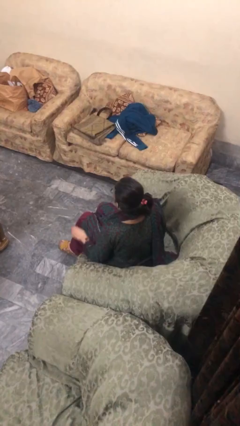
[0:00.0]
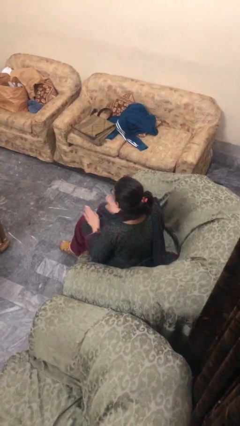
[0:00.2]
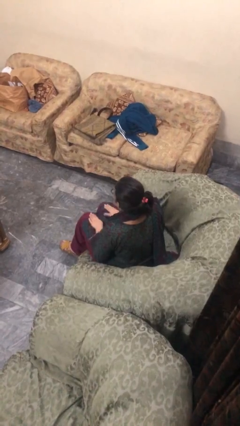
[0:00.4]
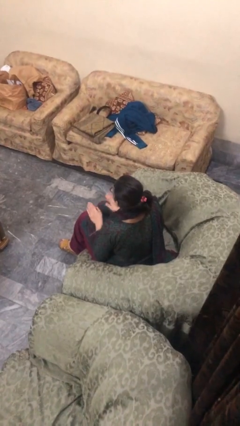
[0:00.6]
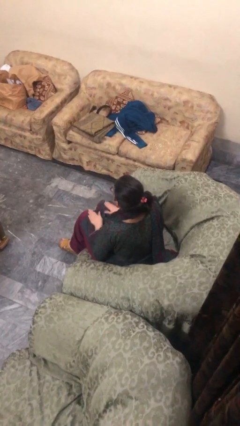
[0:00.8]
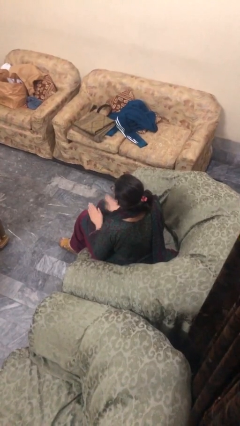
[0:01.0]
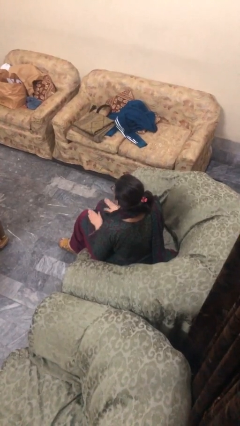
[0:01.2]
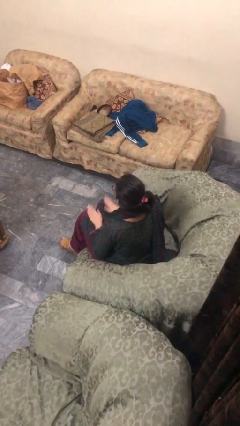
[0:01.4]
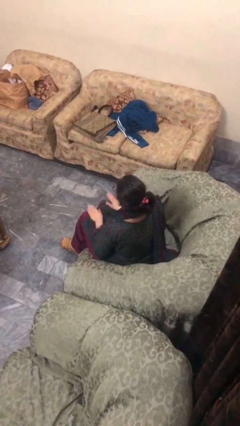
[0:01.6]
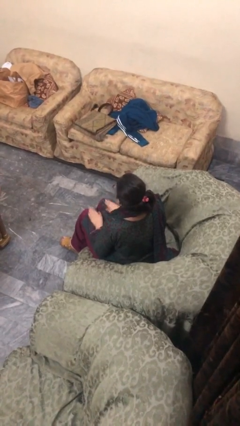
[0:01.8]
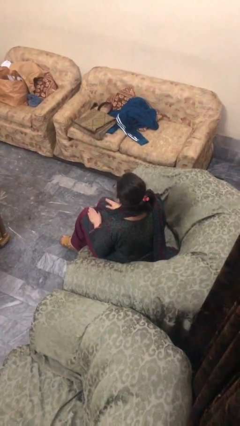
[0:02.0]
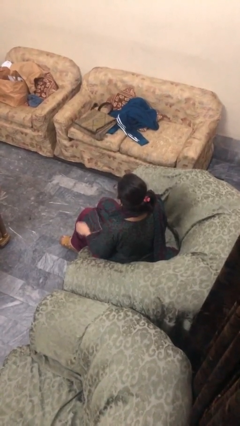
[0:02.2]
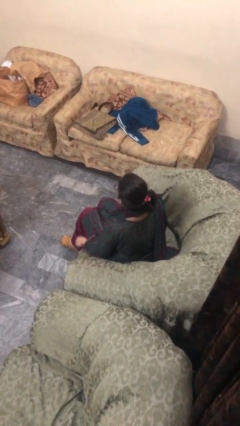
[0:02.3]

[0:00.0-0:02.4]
person slaps hands on thighs

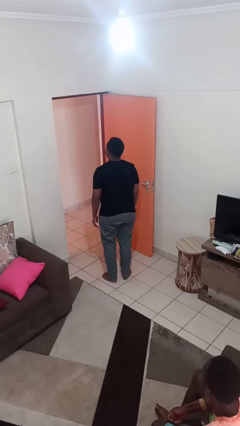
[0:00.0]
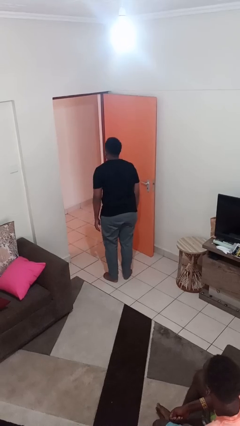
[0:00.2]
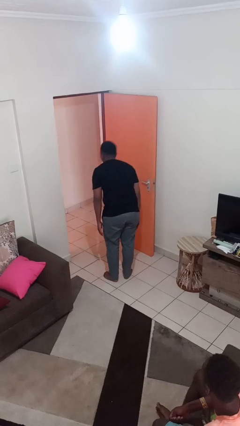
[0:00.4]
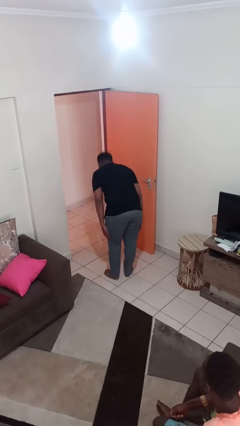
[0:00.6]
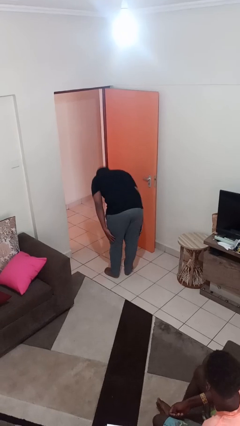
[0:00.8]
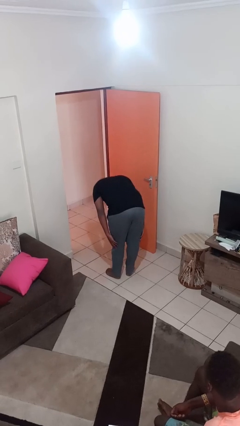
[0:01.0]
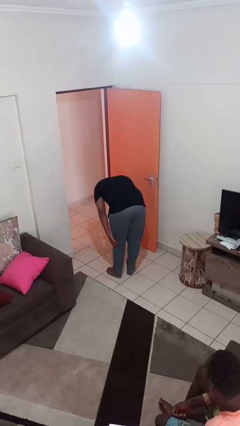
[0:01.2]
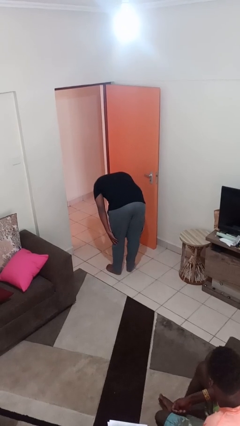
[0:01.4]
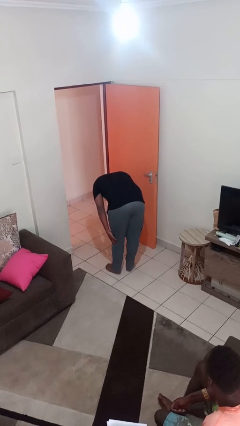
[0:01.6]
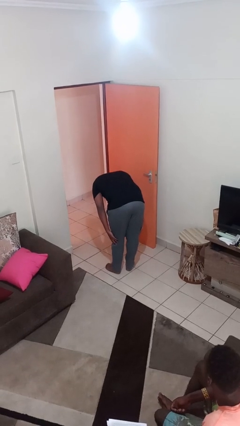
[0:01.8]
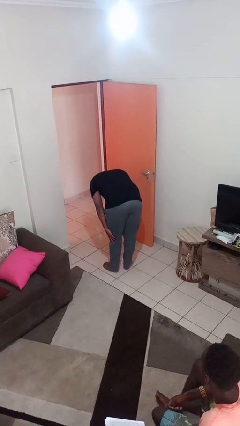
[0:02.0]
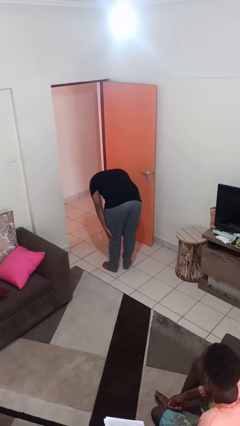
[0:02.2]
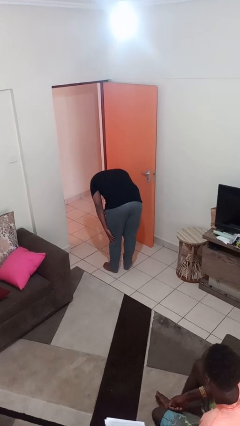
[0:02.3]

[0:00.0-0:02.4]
person bows

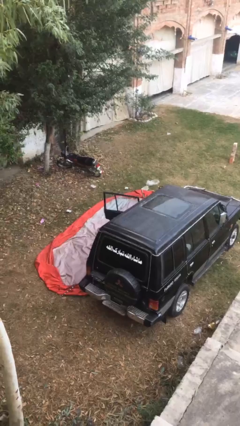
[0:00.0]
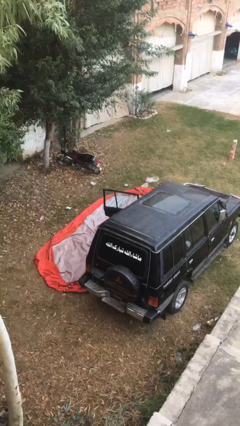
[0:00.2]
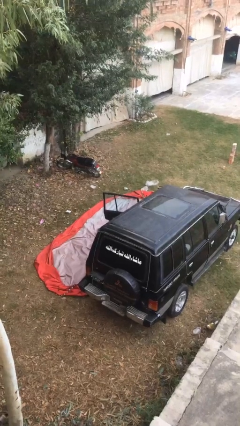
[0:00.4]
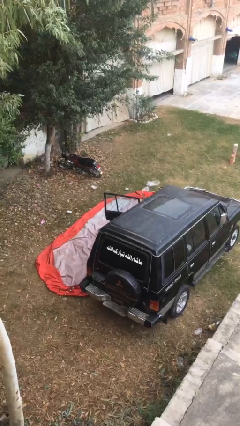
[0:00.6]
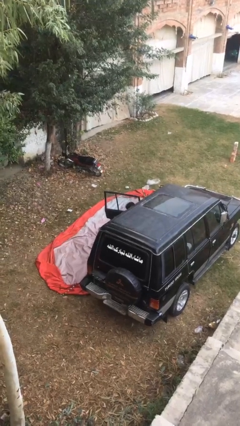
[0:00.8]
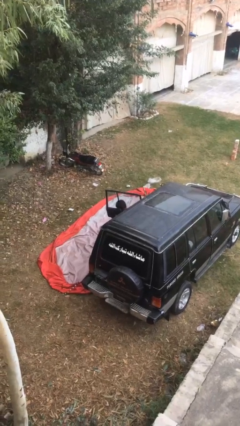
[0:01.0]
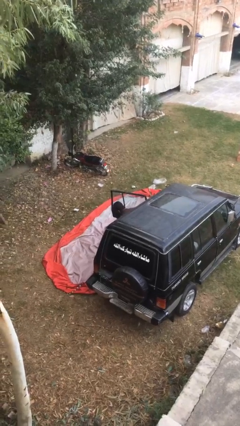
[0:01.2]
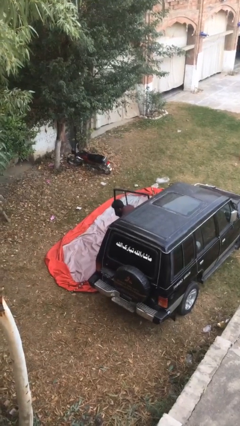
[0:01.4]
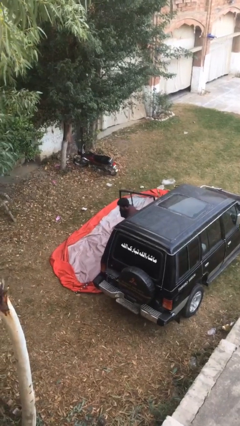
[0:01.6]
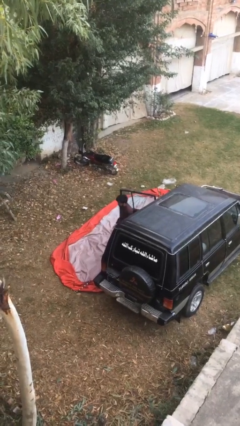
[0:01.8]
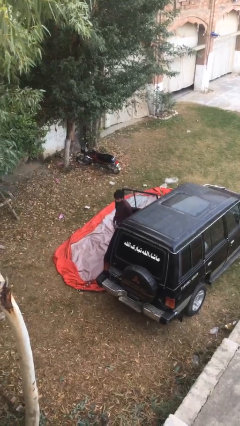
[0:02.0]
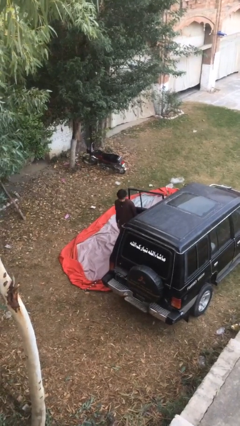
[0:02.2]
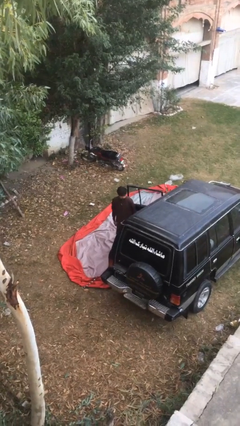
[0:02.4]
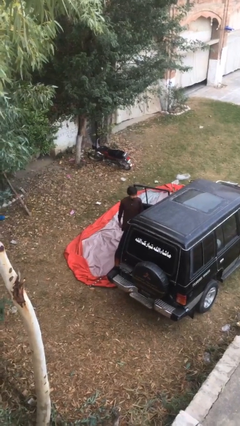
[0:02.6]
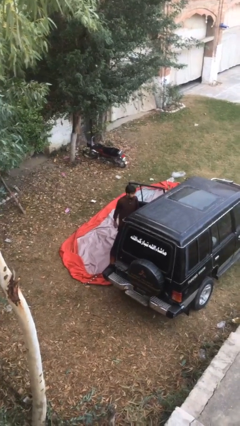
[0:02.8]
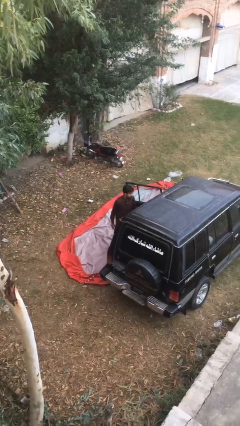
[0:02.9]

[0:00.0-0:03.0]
person exits car

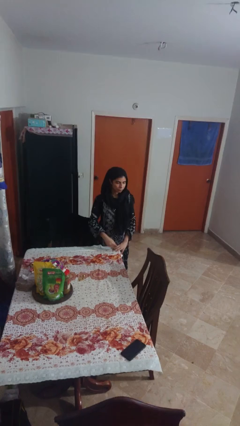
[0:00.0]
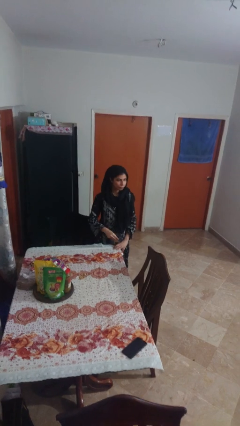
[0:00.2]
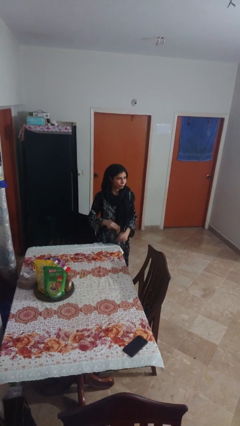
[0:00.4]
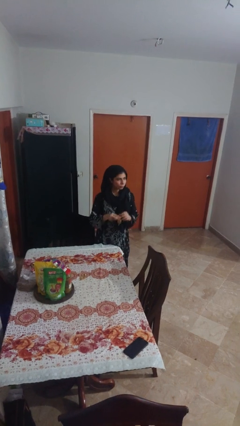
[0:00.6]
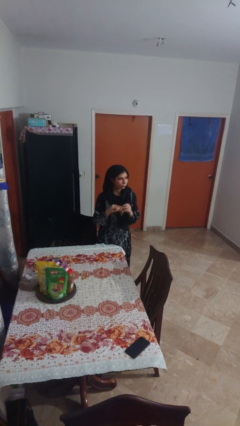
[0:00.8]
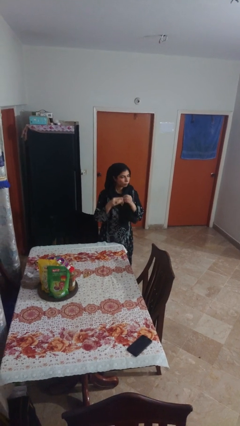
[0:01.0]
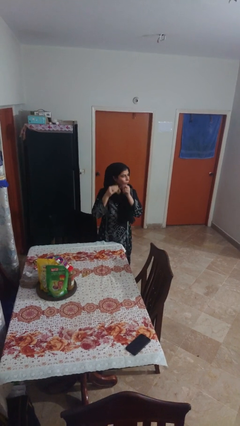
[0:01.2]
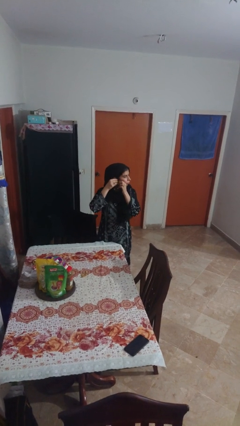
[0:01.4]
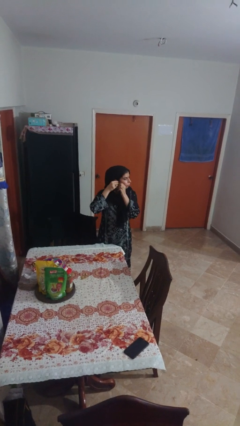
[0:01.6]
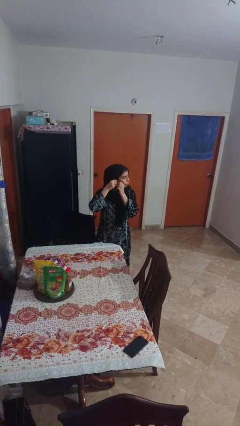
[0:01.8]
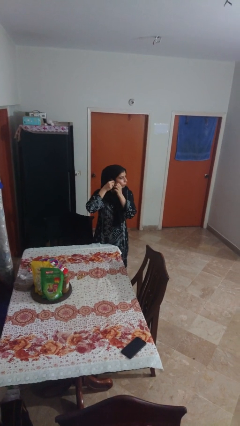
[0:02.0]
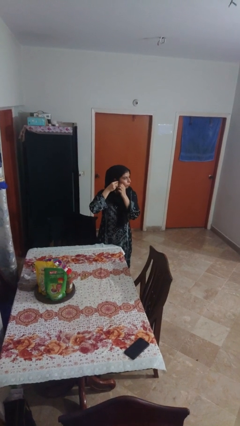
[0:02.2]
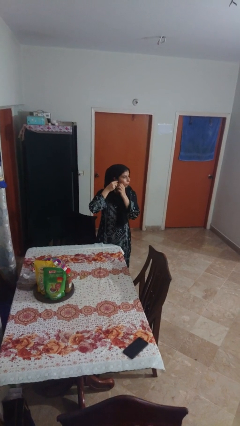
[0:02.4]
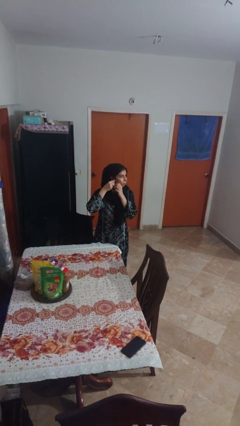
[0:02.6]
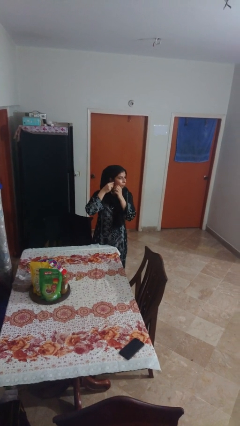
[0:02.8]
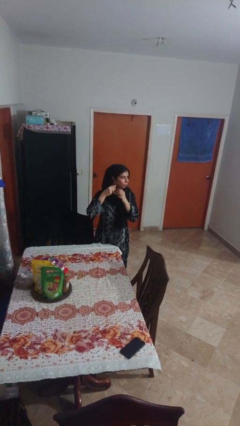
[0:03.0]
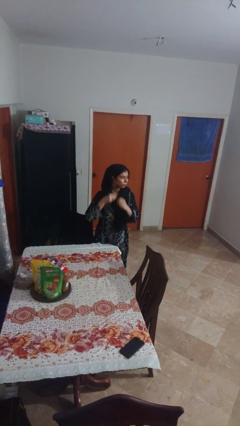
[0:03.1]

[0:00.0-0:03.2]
person puts on earrings

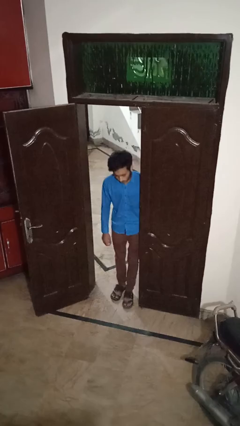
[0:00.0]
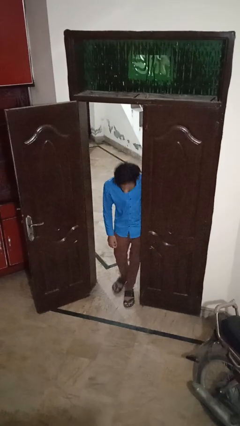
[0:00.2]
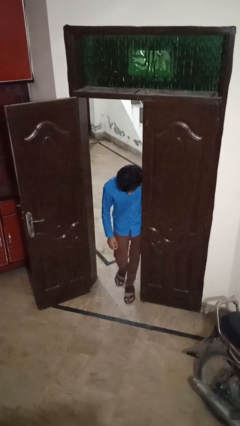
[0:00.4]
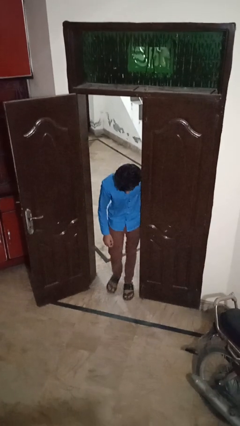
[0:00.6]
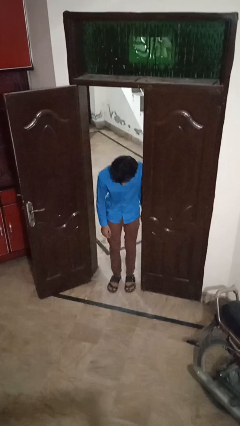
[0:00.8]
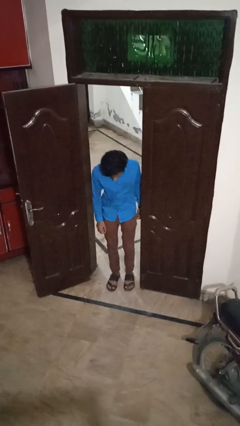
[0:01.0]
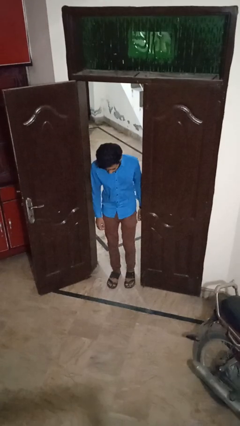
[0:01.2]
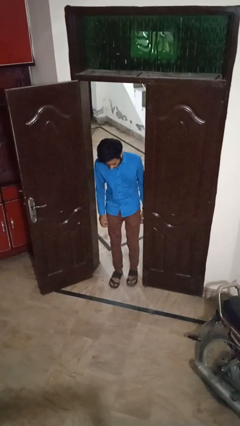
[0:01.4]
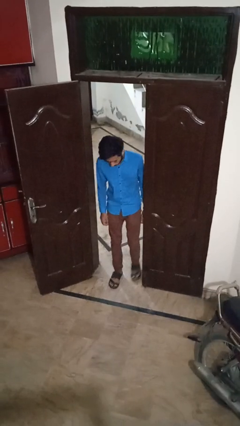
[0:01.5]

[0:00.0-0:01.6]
person bumps into wall

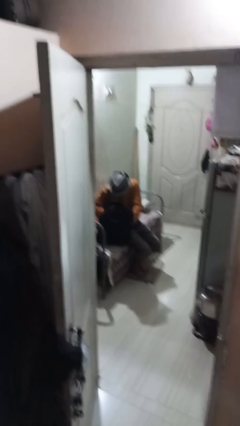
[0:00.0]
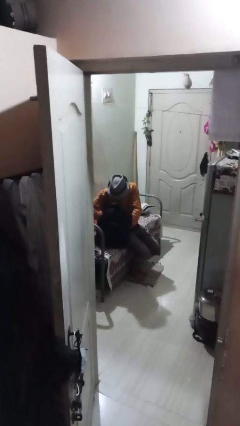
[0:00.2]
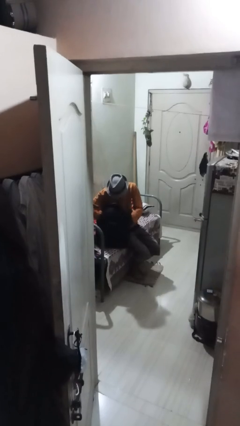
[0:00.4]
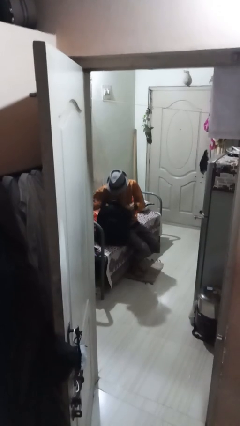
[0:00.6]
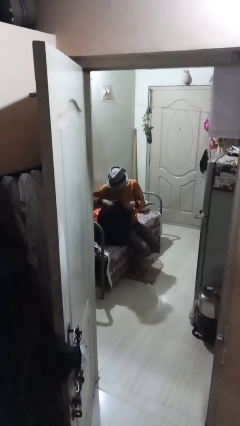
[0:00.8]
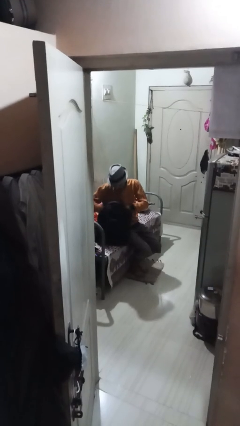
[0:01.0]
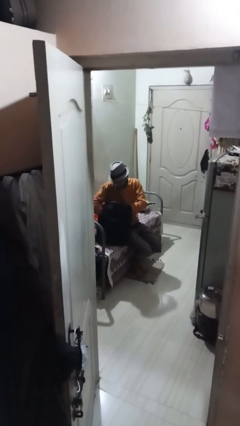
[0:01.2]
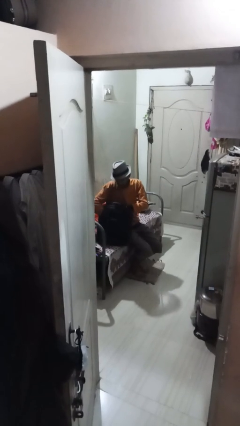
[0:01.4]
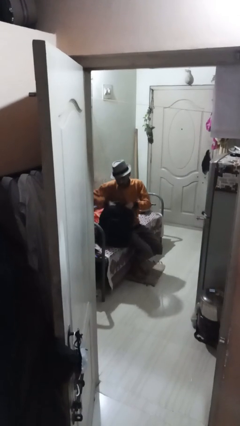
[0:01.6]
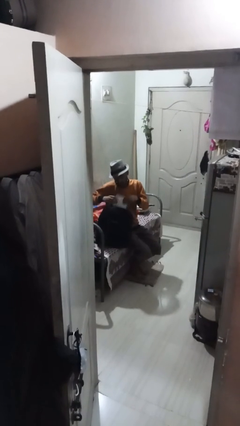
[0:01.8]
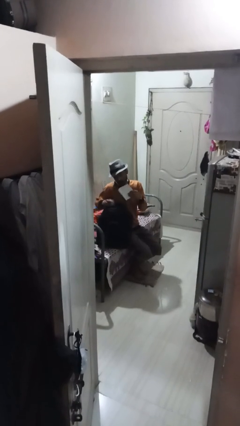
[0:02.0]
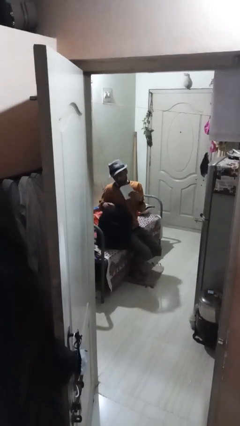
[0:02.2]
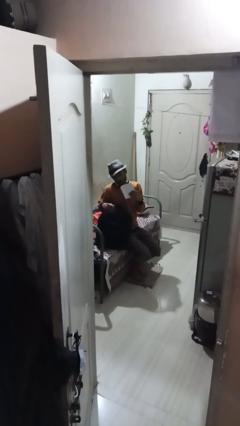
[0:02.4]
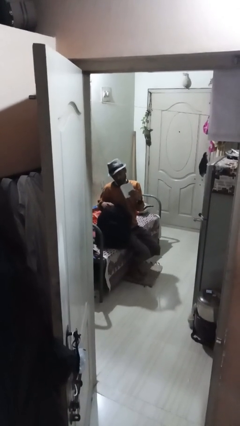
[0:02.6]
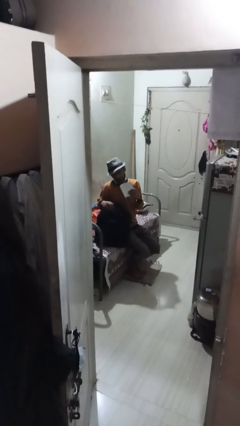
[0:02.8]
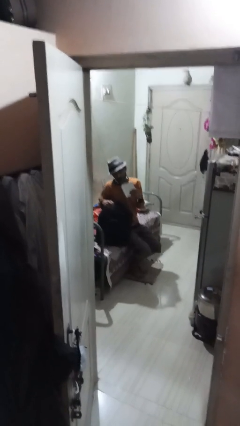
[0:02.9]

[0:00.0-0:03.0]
person takes object from backpack

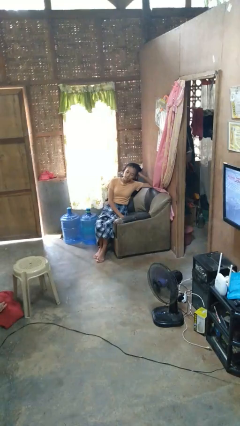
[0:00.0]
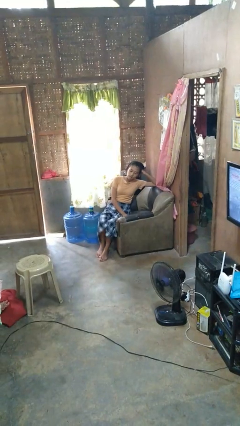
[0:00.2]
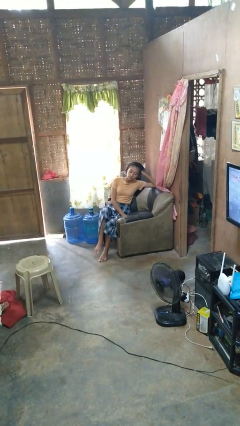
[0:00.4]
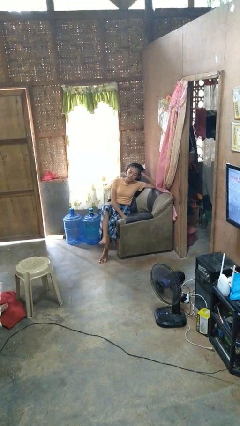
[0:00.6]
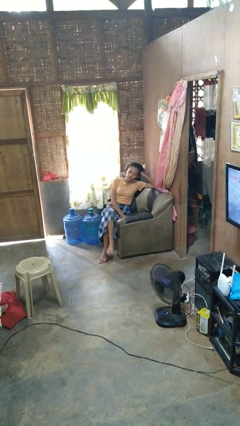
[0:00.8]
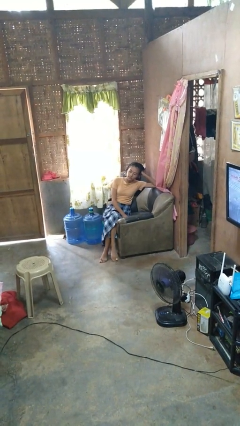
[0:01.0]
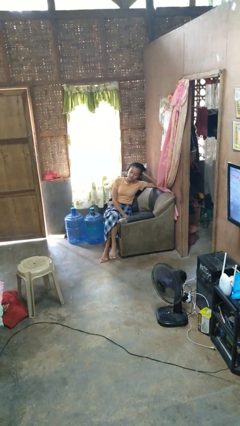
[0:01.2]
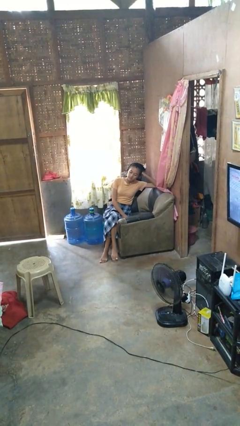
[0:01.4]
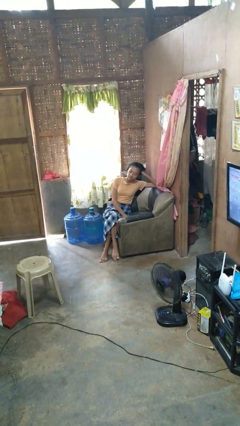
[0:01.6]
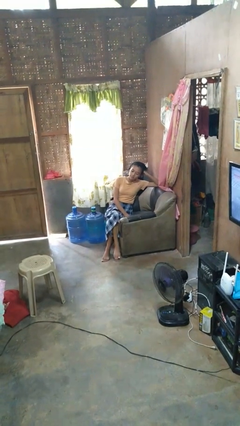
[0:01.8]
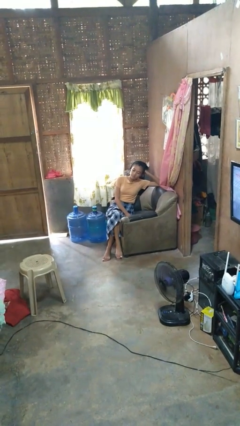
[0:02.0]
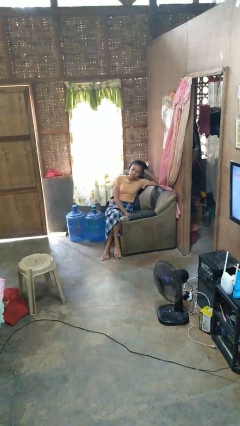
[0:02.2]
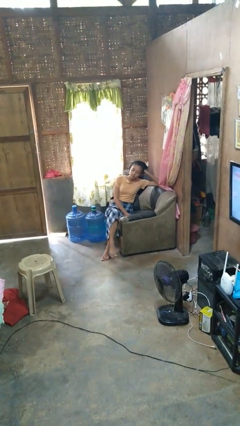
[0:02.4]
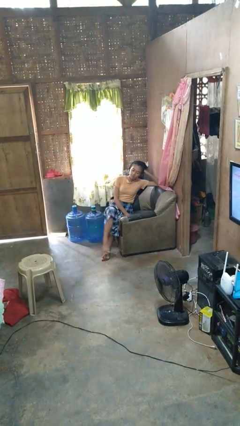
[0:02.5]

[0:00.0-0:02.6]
person crosses legs
